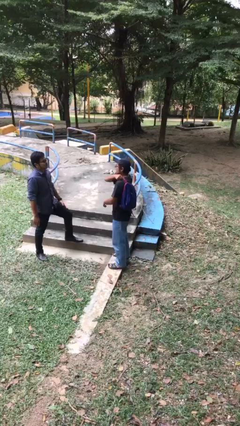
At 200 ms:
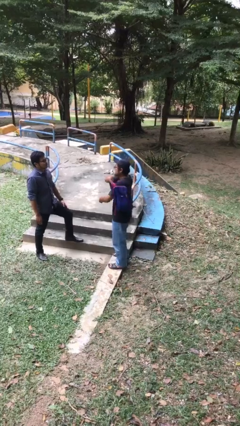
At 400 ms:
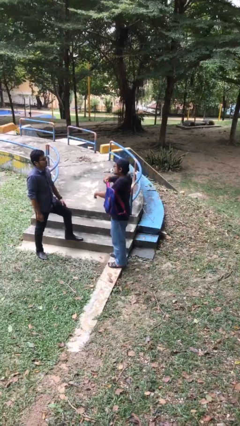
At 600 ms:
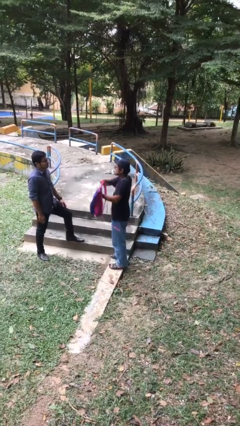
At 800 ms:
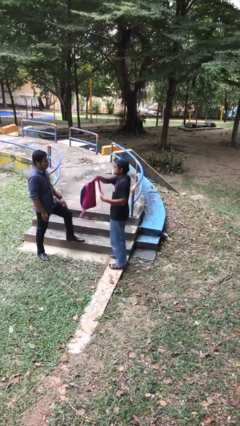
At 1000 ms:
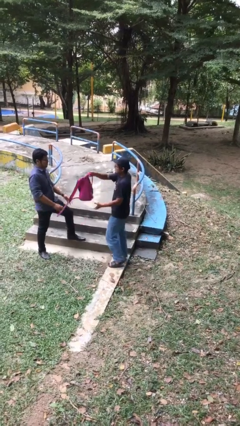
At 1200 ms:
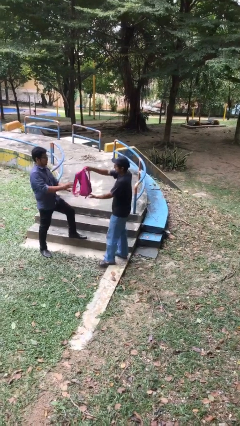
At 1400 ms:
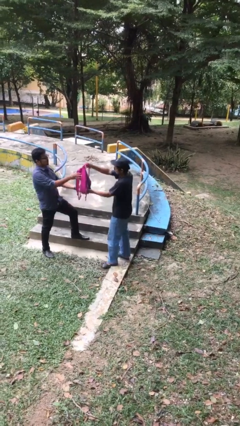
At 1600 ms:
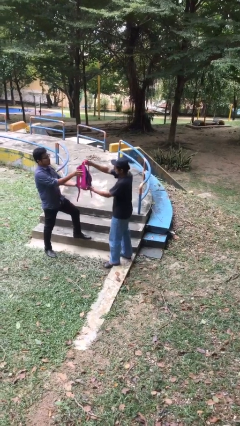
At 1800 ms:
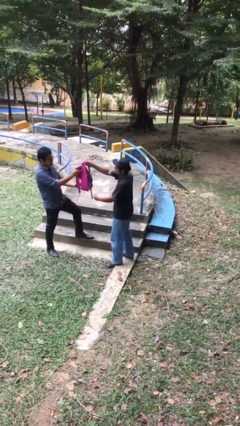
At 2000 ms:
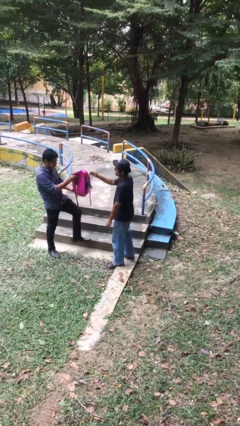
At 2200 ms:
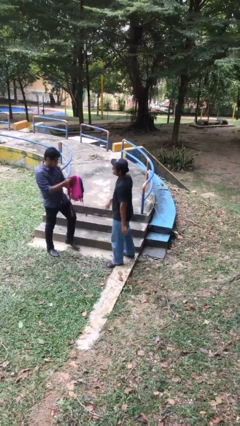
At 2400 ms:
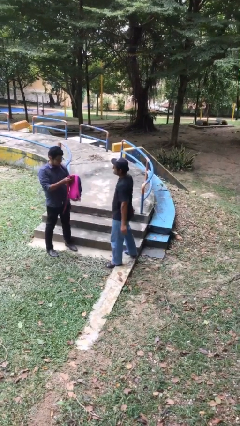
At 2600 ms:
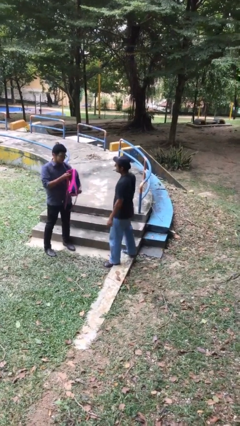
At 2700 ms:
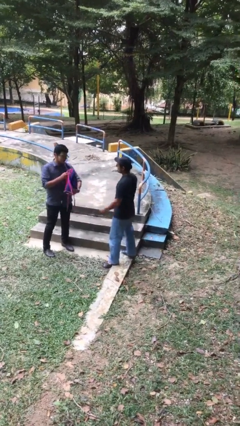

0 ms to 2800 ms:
person transfers object to person

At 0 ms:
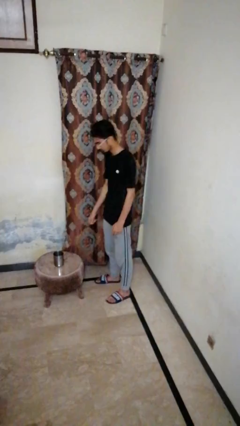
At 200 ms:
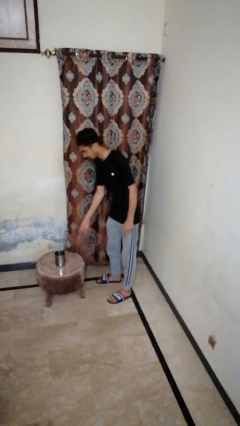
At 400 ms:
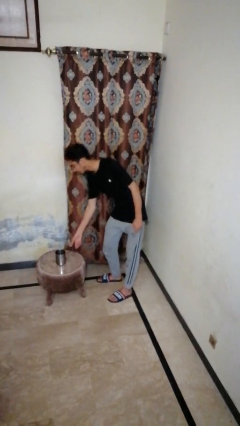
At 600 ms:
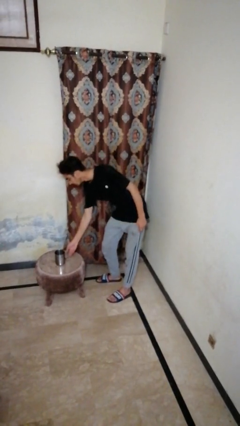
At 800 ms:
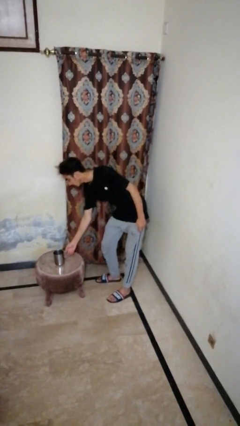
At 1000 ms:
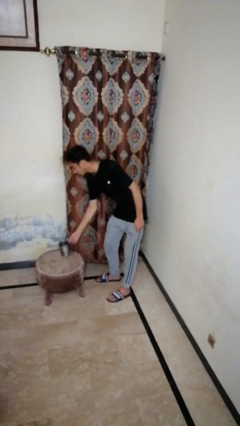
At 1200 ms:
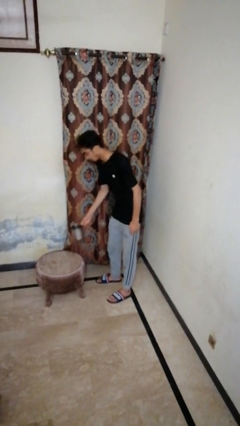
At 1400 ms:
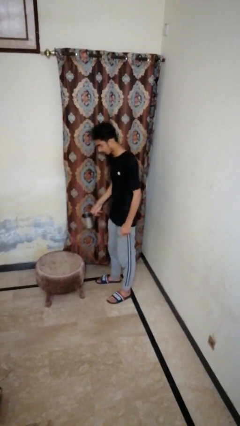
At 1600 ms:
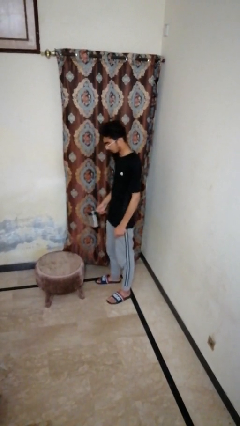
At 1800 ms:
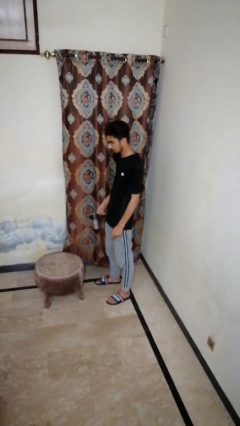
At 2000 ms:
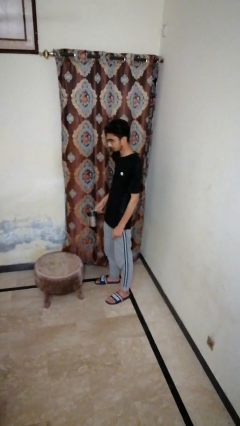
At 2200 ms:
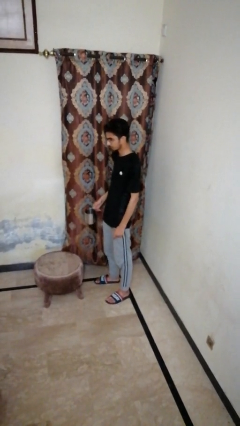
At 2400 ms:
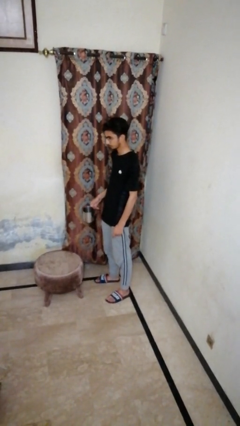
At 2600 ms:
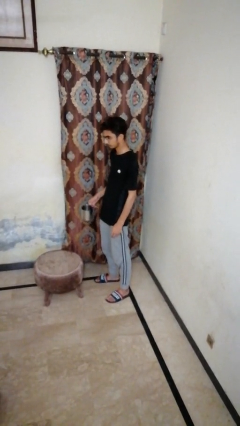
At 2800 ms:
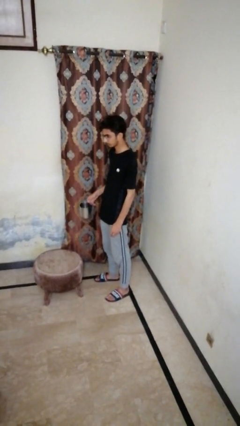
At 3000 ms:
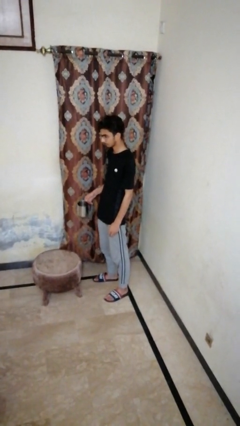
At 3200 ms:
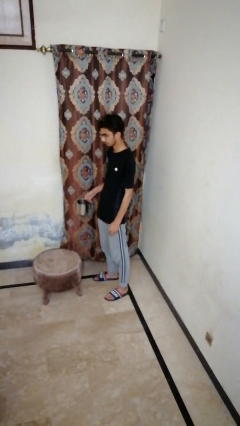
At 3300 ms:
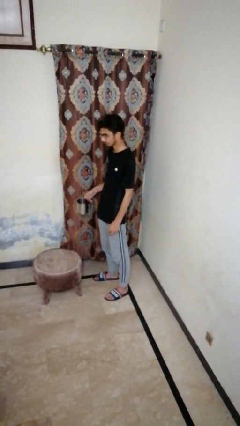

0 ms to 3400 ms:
person picks up object from table

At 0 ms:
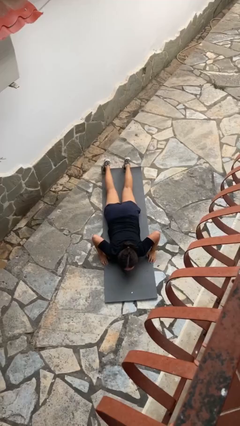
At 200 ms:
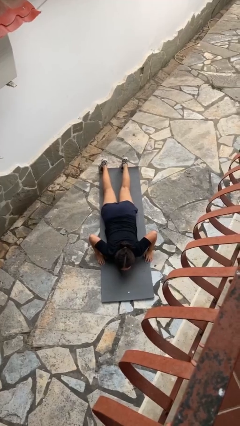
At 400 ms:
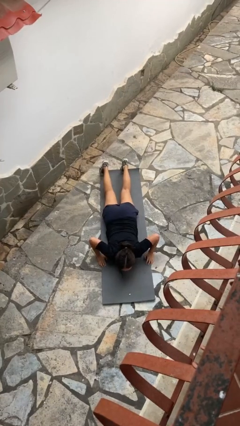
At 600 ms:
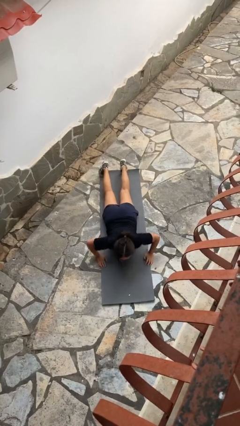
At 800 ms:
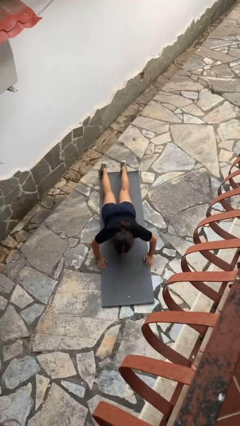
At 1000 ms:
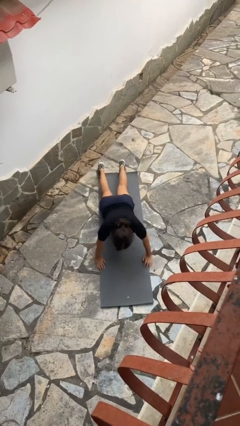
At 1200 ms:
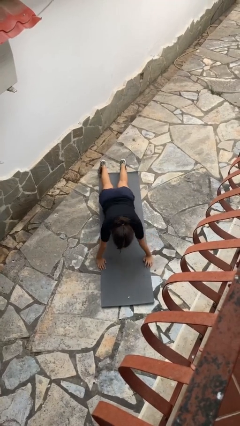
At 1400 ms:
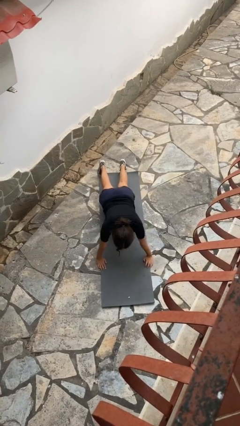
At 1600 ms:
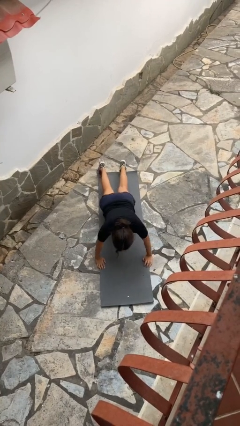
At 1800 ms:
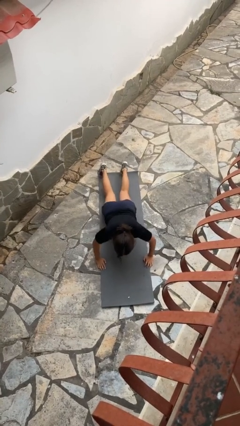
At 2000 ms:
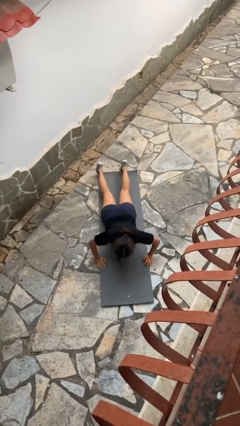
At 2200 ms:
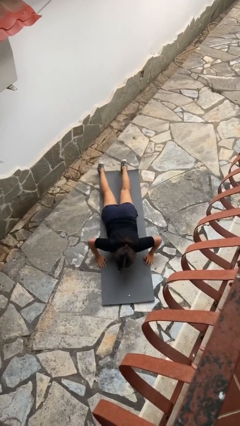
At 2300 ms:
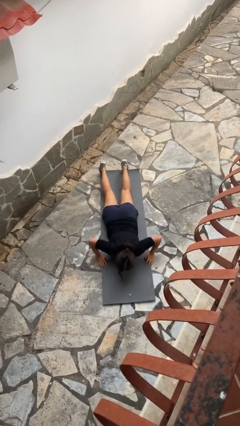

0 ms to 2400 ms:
person exercises with pushup

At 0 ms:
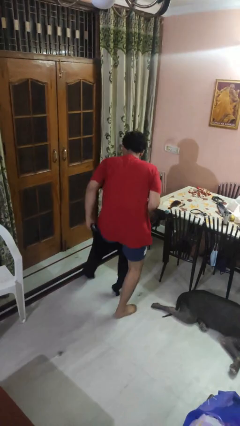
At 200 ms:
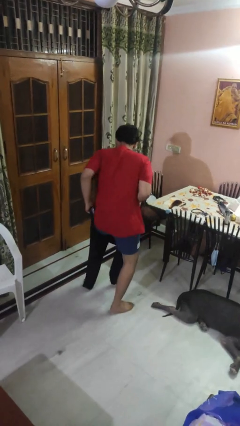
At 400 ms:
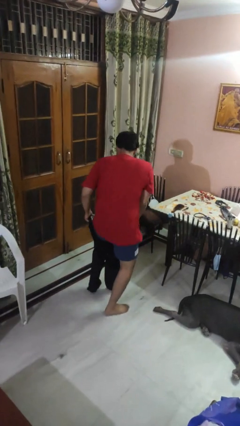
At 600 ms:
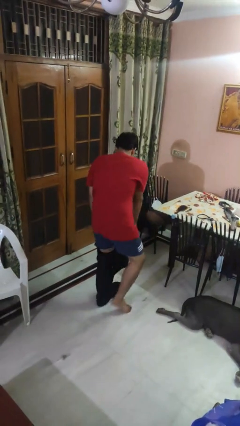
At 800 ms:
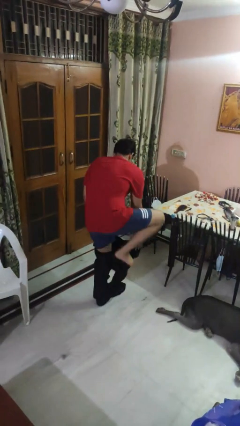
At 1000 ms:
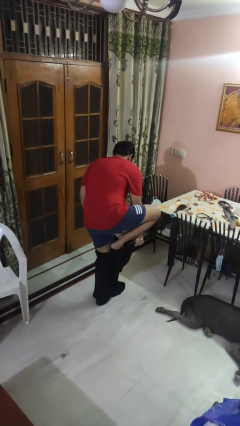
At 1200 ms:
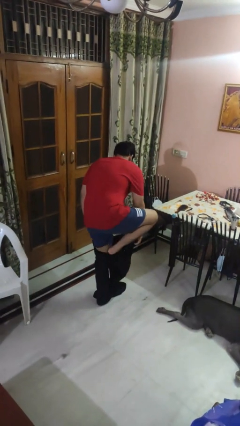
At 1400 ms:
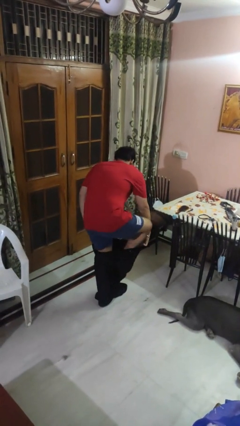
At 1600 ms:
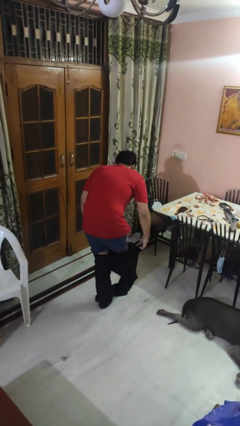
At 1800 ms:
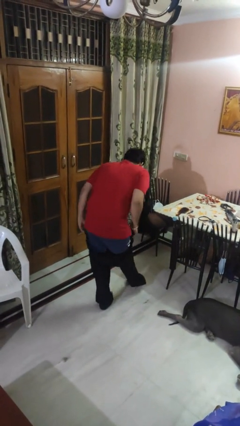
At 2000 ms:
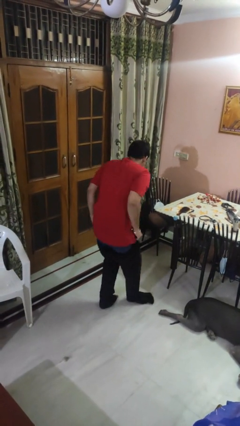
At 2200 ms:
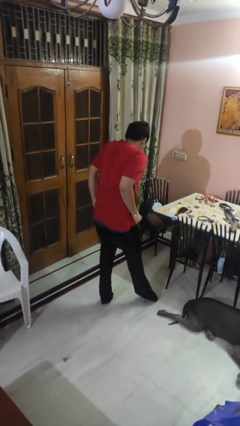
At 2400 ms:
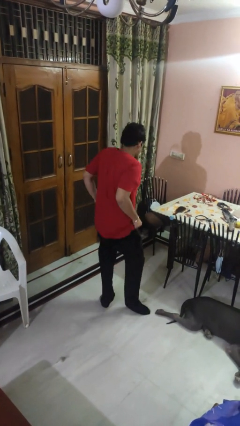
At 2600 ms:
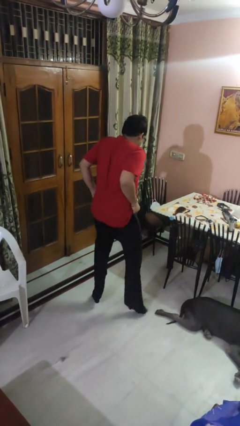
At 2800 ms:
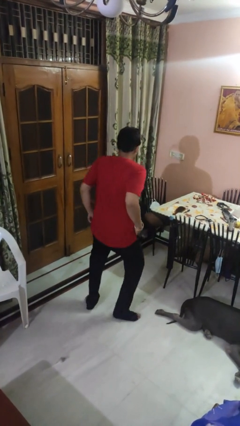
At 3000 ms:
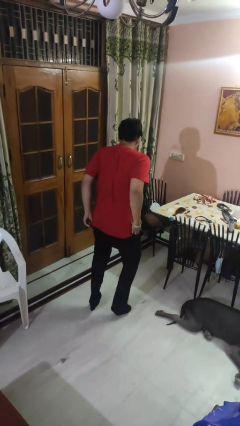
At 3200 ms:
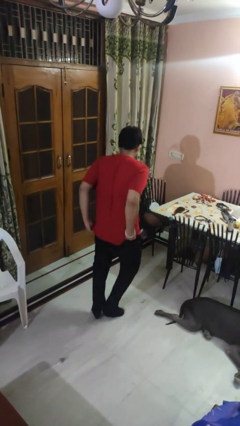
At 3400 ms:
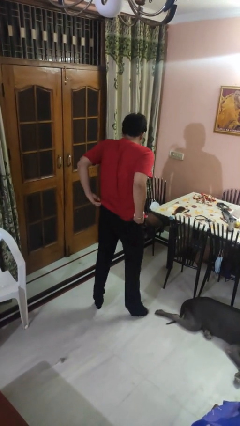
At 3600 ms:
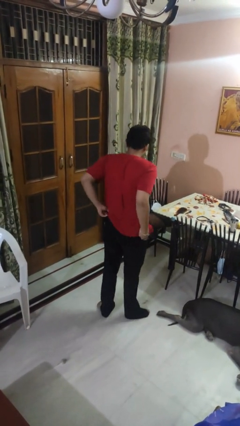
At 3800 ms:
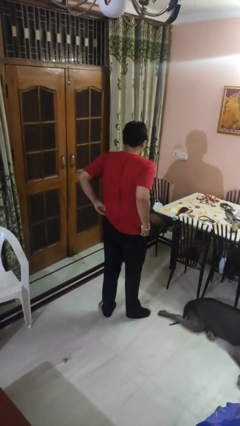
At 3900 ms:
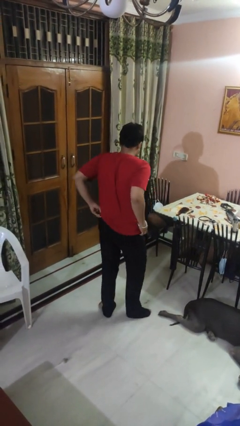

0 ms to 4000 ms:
person puts on pants

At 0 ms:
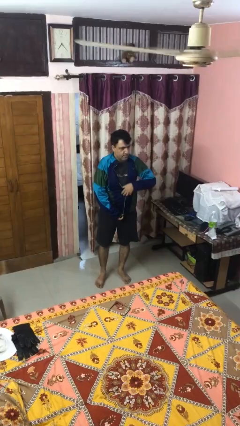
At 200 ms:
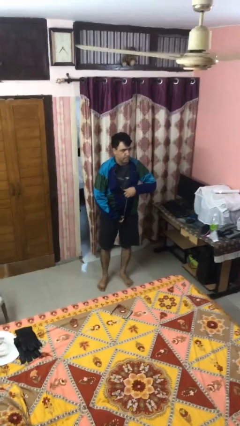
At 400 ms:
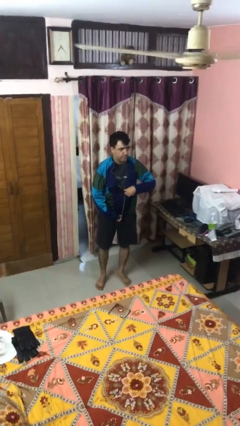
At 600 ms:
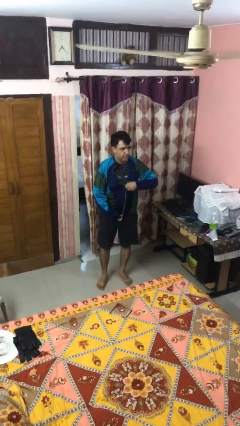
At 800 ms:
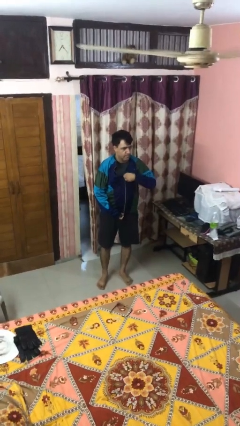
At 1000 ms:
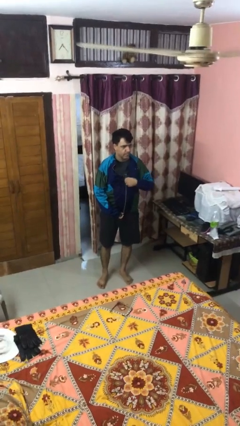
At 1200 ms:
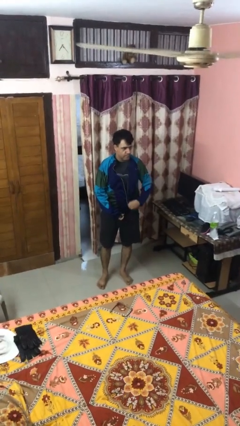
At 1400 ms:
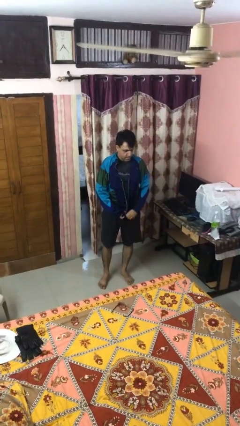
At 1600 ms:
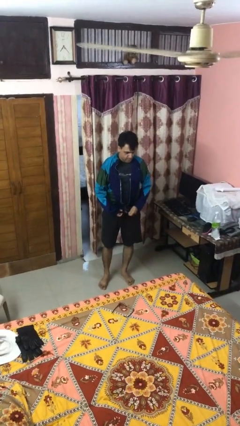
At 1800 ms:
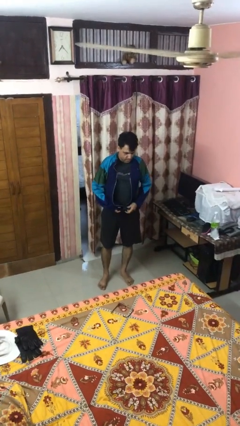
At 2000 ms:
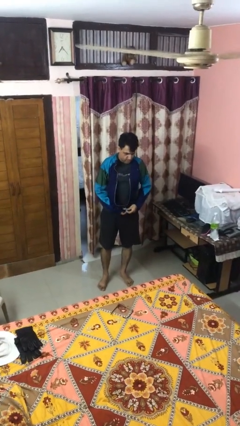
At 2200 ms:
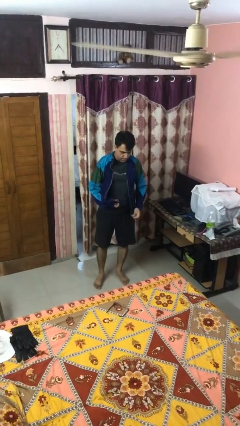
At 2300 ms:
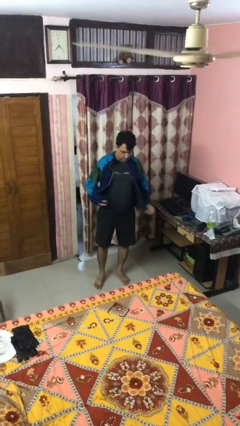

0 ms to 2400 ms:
person unzips jacket

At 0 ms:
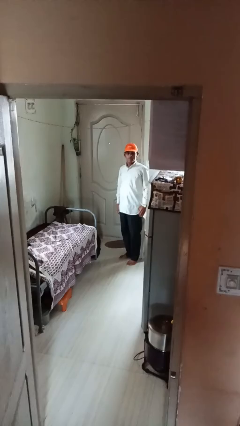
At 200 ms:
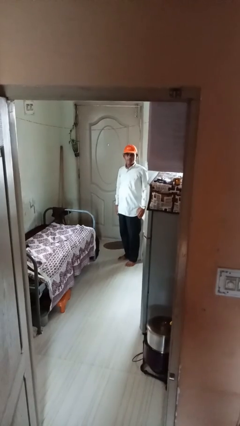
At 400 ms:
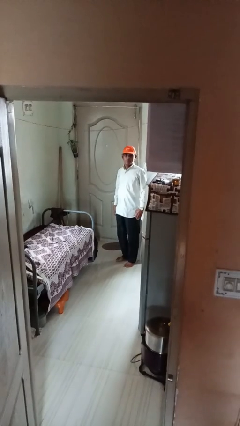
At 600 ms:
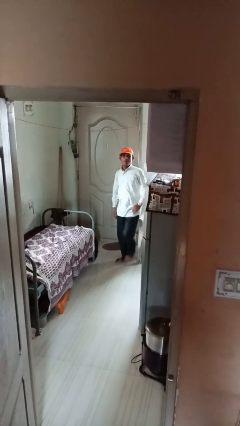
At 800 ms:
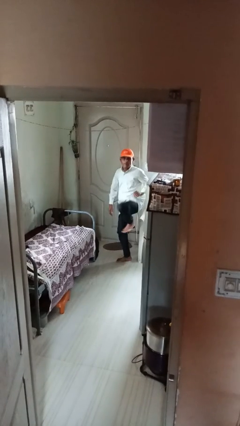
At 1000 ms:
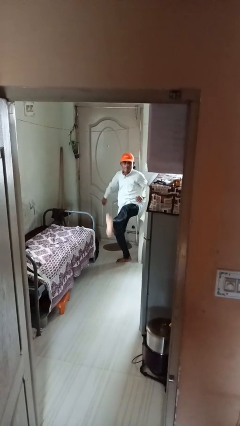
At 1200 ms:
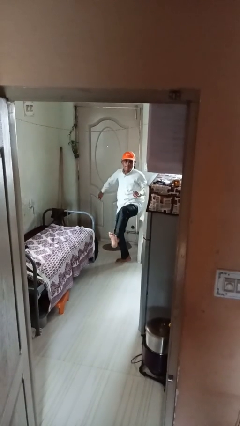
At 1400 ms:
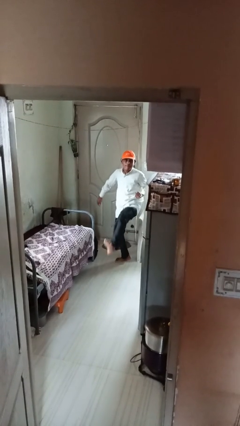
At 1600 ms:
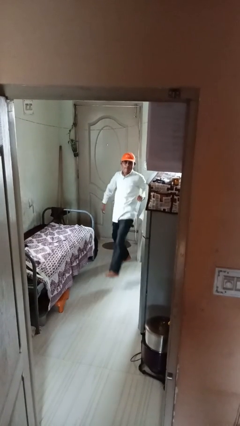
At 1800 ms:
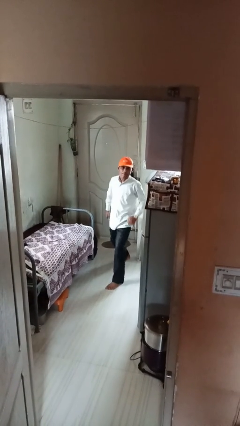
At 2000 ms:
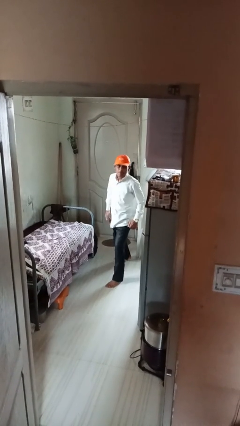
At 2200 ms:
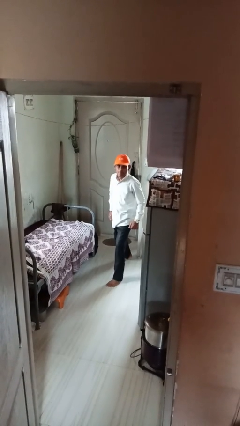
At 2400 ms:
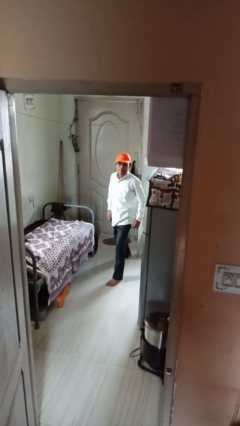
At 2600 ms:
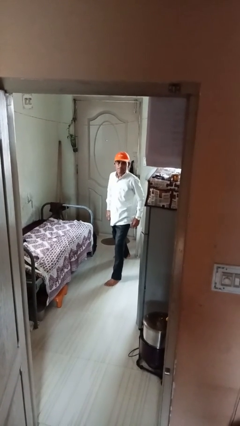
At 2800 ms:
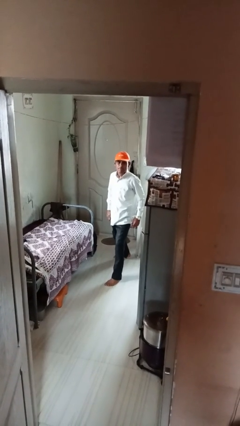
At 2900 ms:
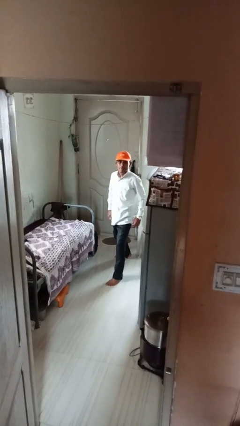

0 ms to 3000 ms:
person karate kicks
